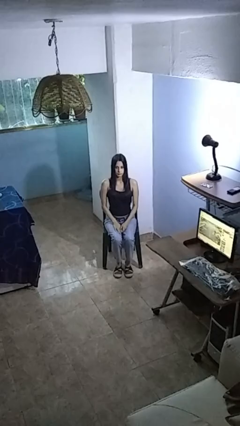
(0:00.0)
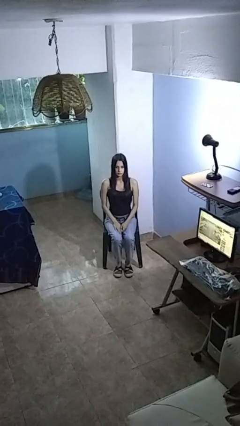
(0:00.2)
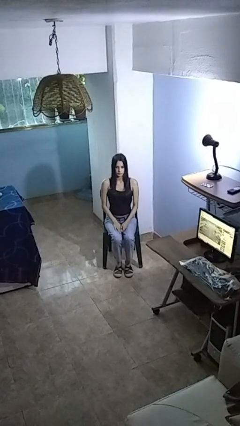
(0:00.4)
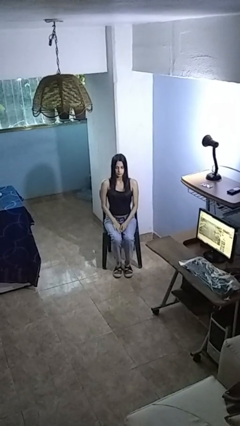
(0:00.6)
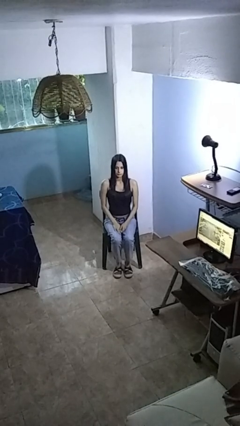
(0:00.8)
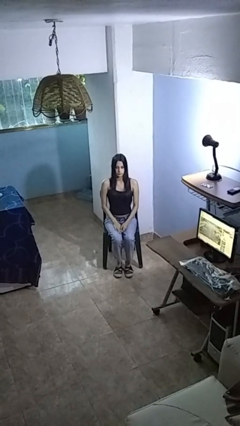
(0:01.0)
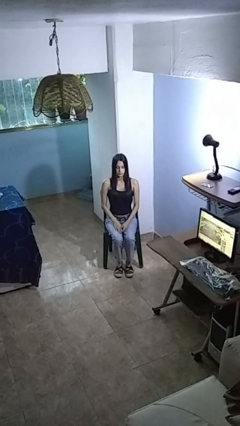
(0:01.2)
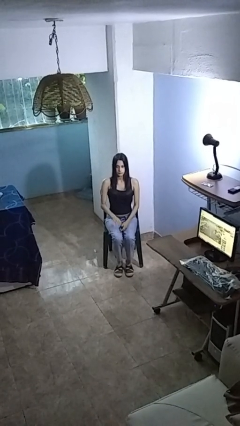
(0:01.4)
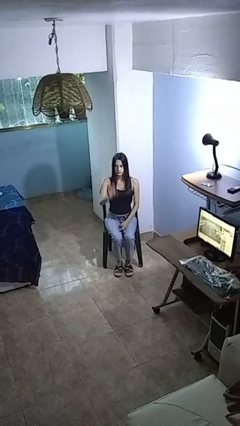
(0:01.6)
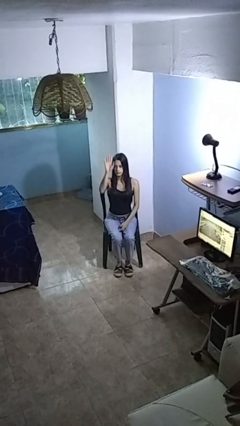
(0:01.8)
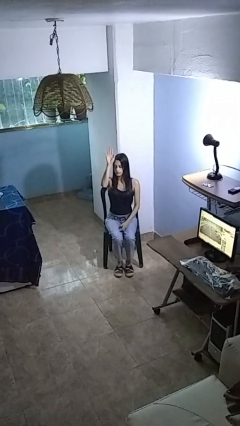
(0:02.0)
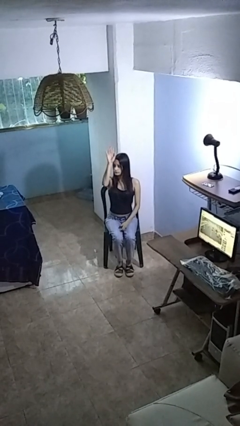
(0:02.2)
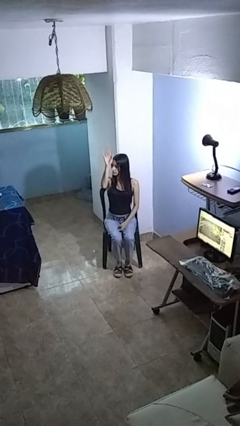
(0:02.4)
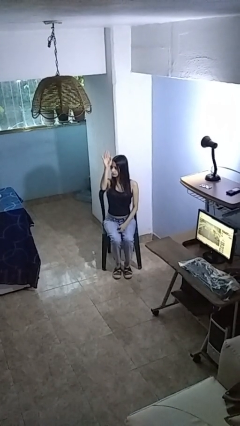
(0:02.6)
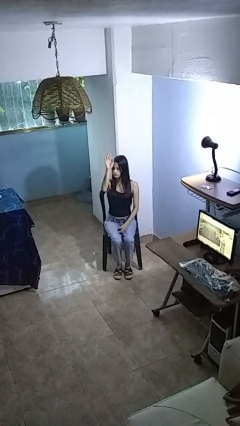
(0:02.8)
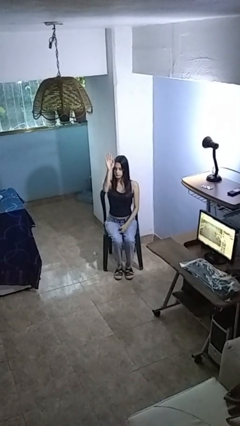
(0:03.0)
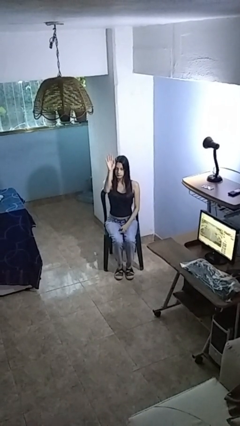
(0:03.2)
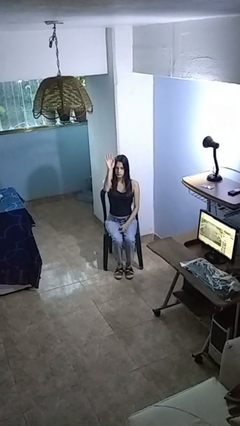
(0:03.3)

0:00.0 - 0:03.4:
person gestures raise hand

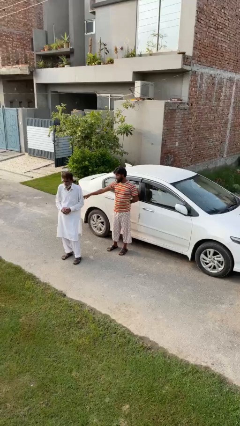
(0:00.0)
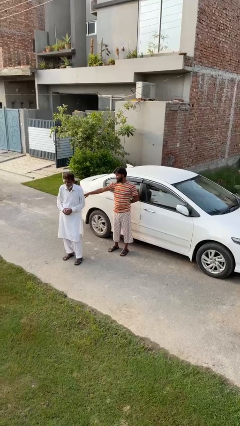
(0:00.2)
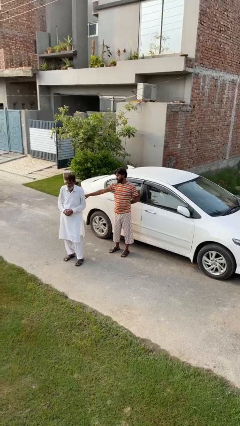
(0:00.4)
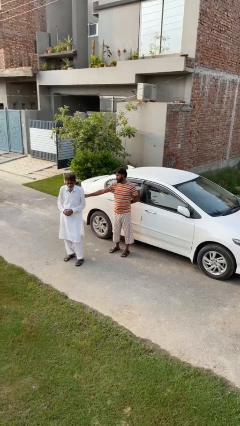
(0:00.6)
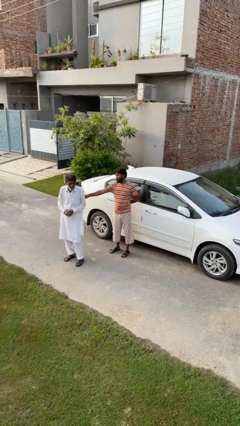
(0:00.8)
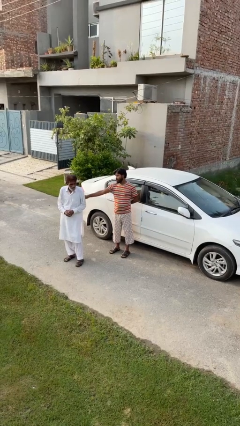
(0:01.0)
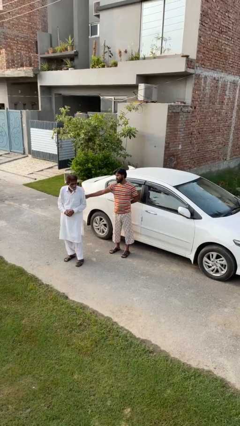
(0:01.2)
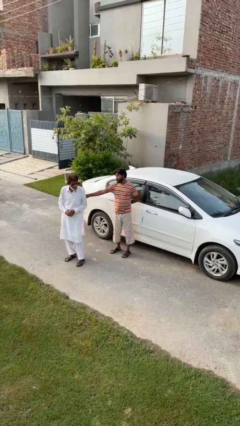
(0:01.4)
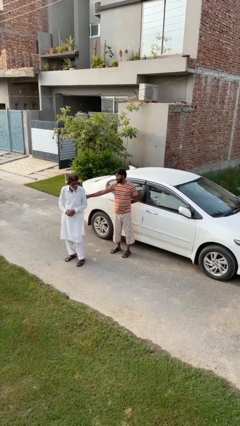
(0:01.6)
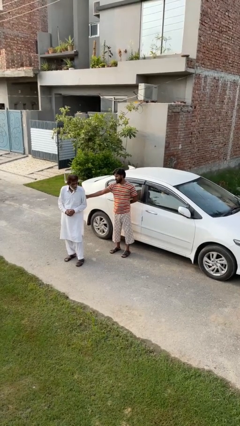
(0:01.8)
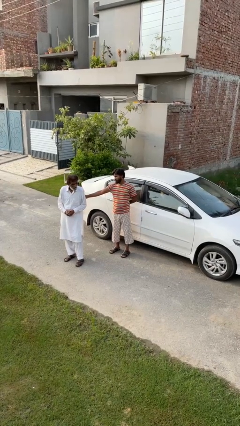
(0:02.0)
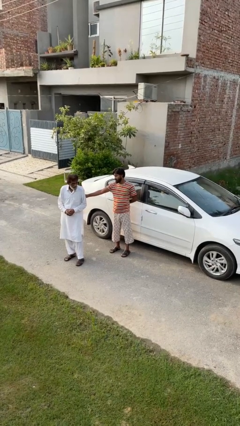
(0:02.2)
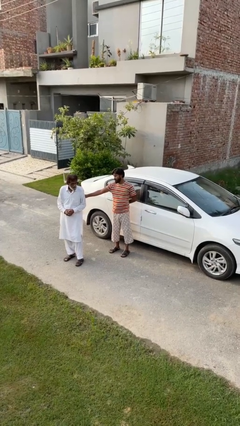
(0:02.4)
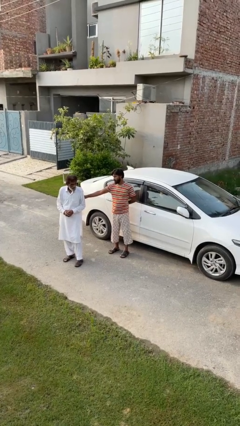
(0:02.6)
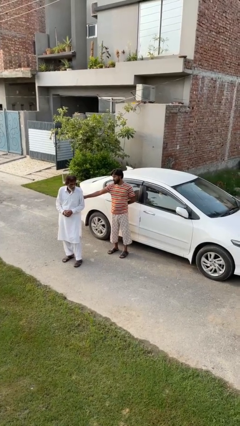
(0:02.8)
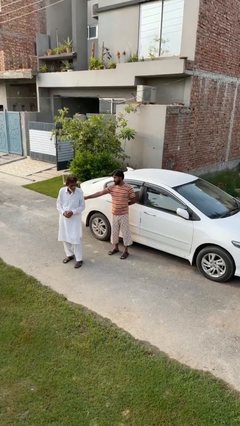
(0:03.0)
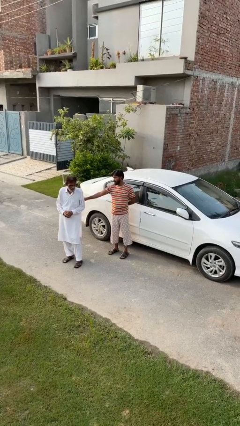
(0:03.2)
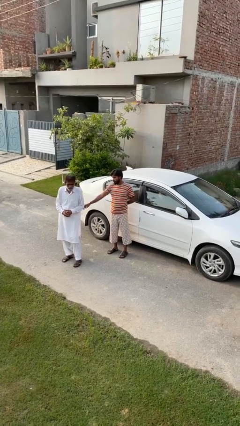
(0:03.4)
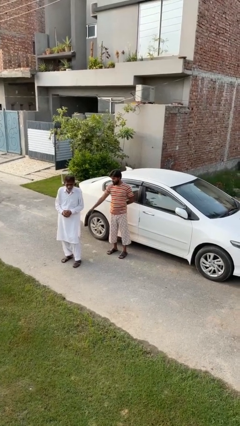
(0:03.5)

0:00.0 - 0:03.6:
person touches back of person

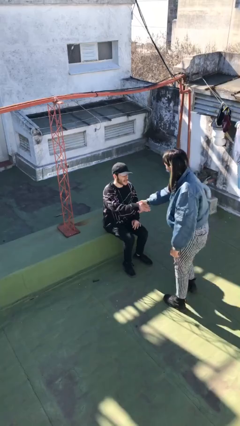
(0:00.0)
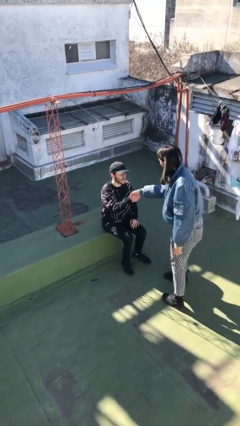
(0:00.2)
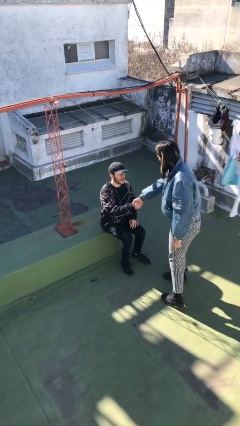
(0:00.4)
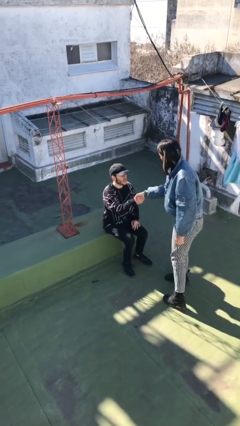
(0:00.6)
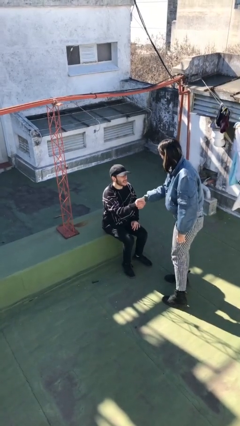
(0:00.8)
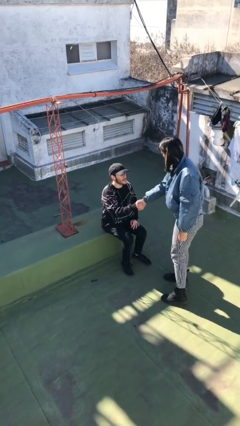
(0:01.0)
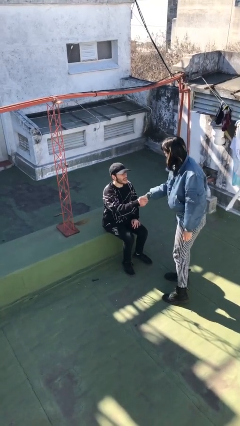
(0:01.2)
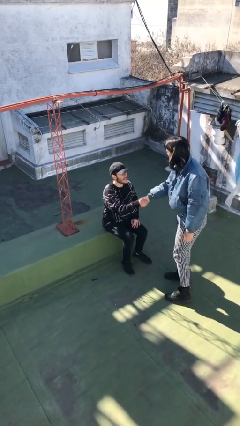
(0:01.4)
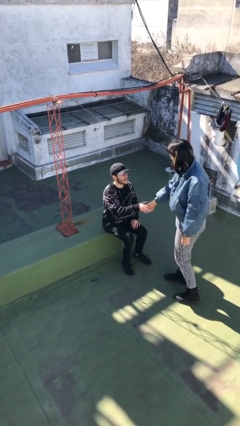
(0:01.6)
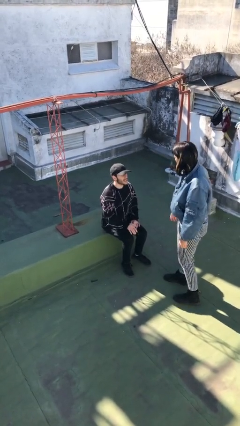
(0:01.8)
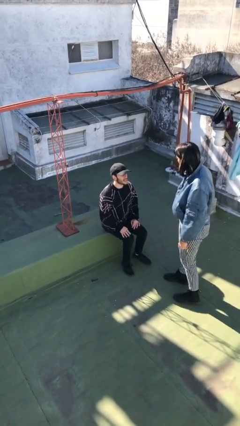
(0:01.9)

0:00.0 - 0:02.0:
person shakes hand

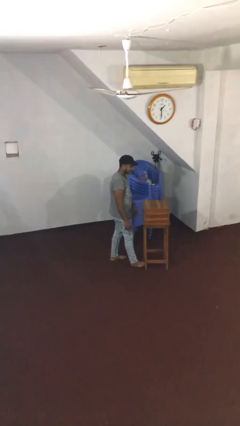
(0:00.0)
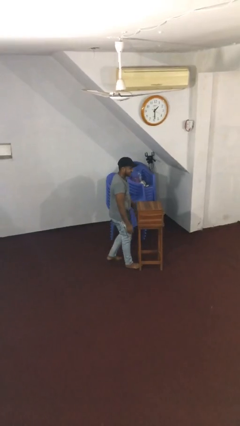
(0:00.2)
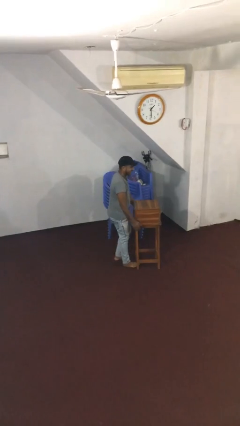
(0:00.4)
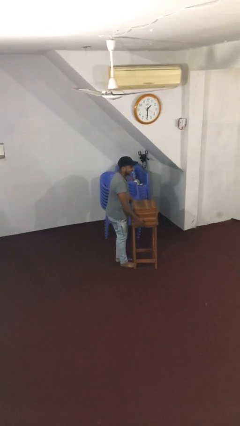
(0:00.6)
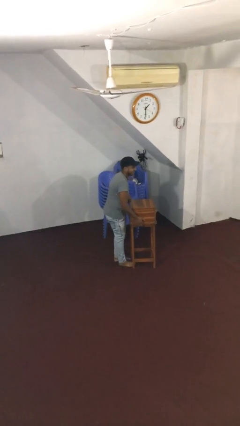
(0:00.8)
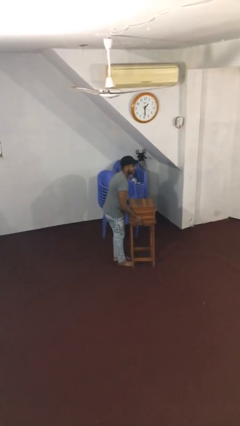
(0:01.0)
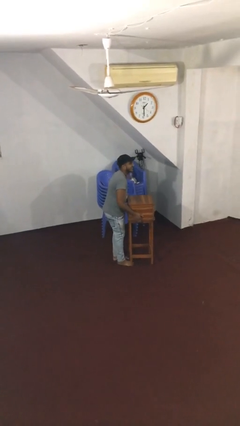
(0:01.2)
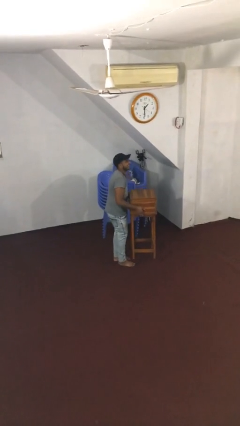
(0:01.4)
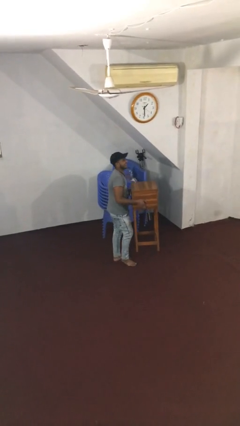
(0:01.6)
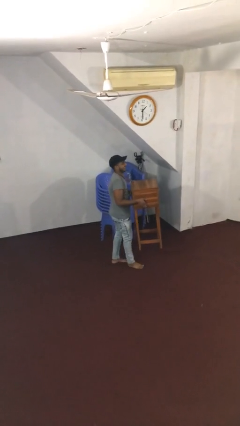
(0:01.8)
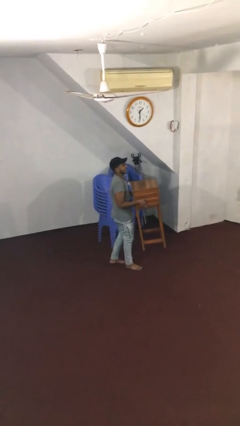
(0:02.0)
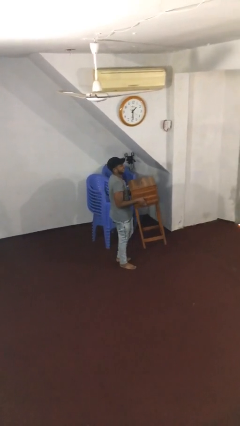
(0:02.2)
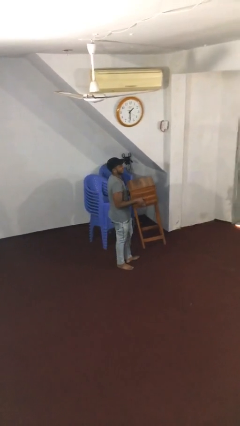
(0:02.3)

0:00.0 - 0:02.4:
person picks up object from floor

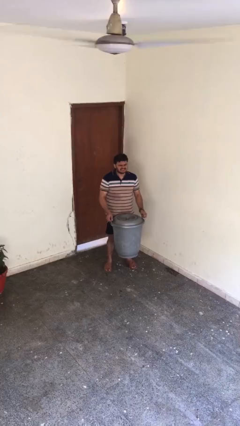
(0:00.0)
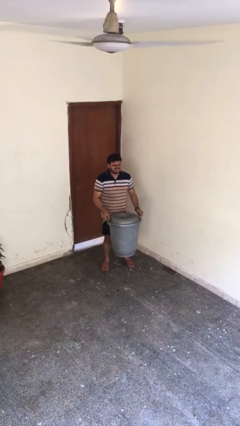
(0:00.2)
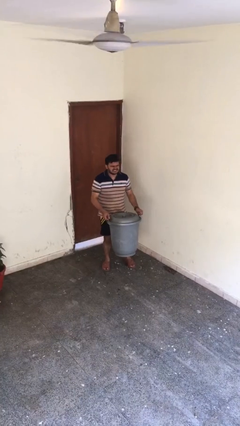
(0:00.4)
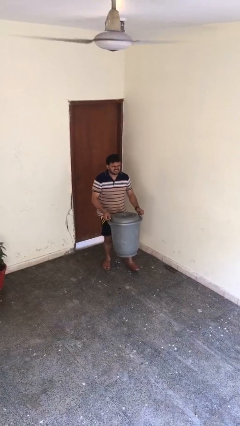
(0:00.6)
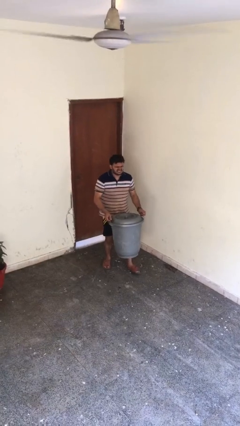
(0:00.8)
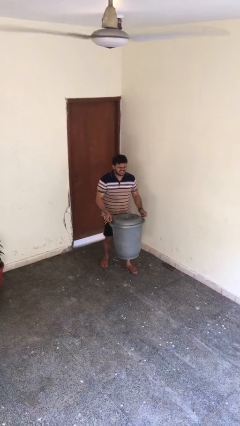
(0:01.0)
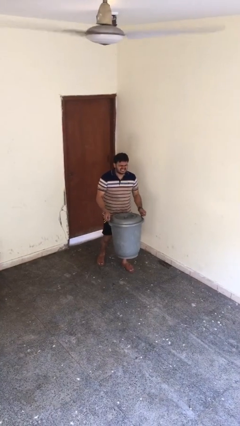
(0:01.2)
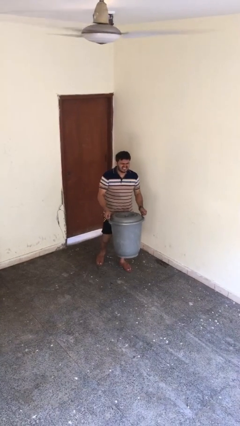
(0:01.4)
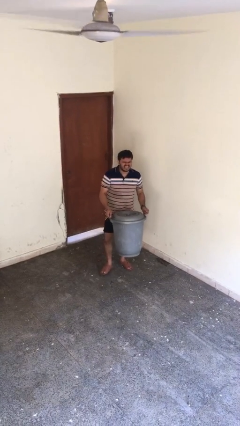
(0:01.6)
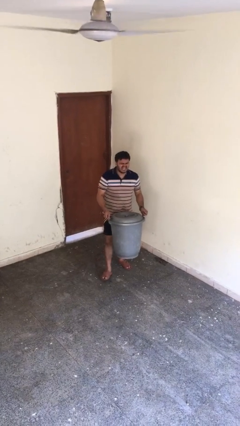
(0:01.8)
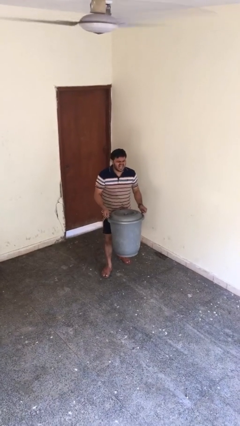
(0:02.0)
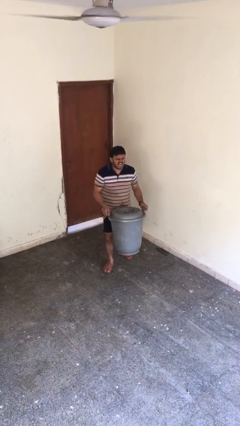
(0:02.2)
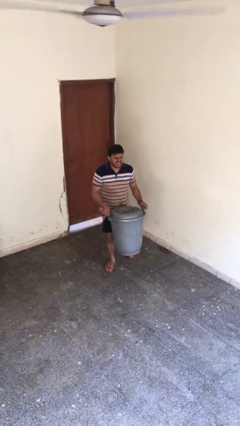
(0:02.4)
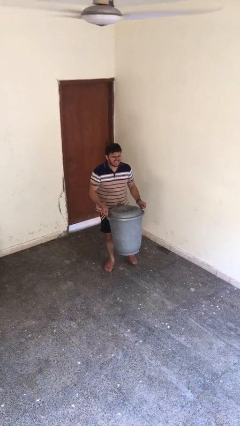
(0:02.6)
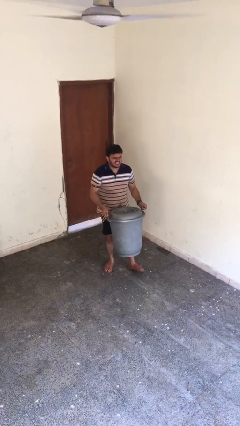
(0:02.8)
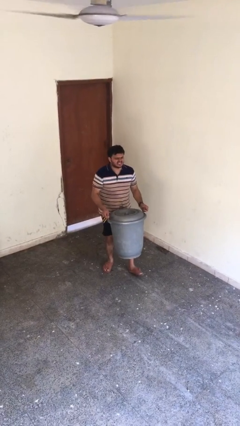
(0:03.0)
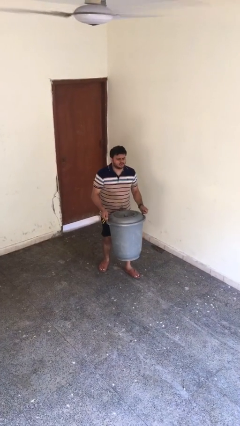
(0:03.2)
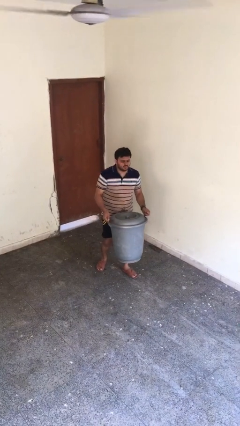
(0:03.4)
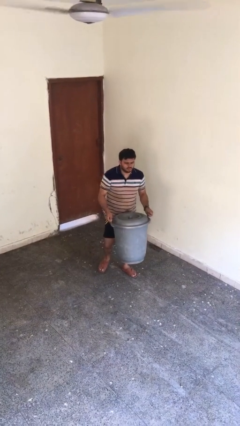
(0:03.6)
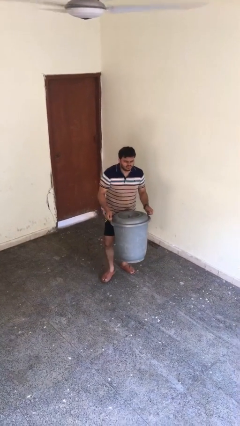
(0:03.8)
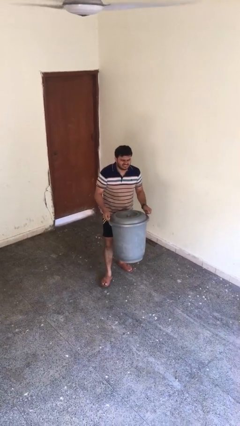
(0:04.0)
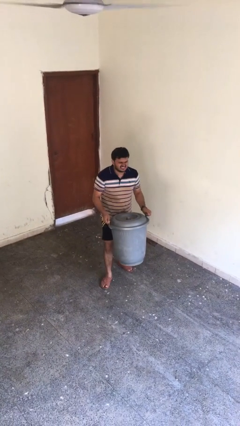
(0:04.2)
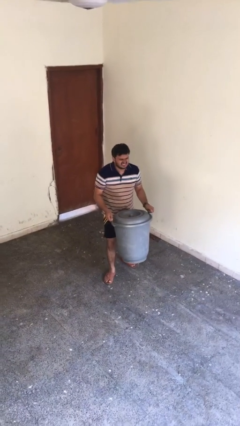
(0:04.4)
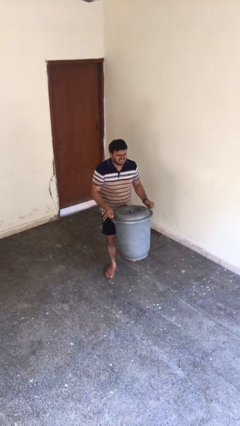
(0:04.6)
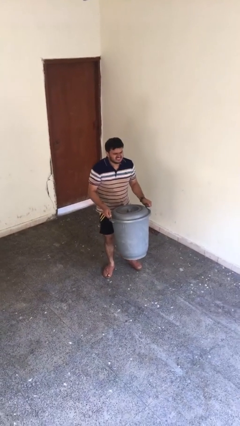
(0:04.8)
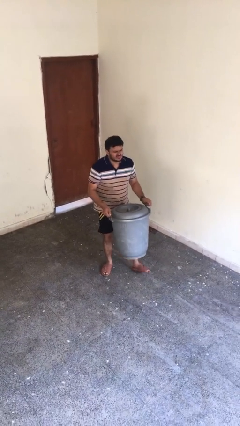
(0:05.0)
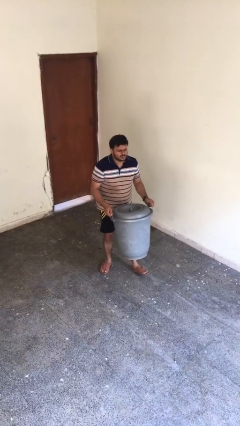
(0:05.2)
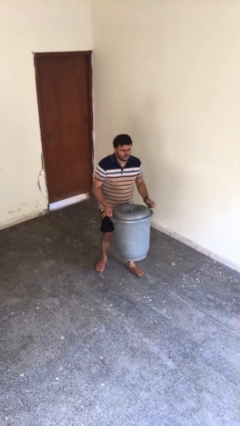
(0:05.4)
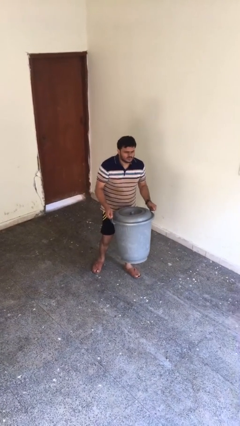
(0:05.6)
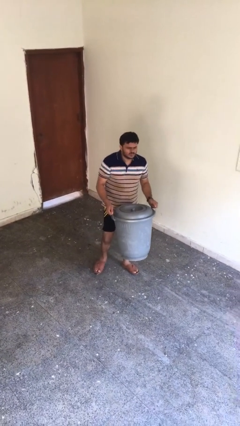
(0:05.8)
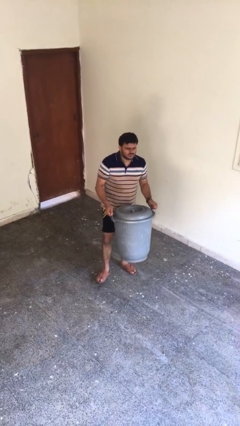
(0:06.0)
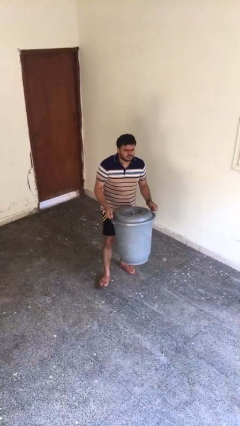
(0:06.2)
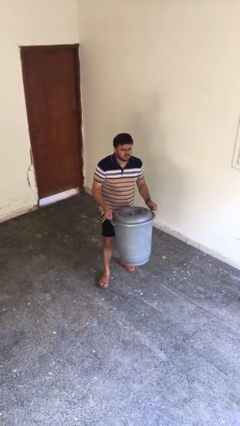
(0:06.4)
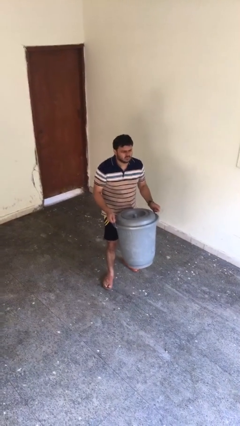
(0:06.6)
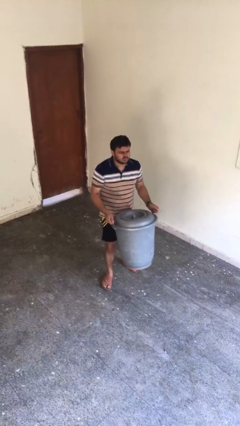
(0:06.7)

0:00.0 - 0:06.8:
person carries heavy object
